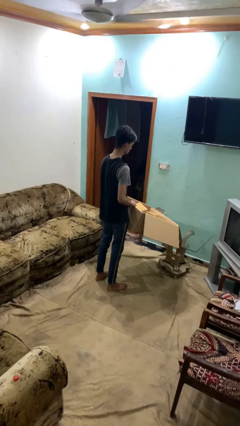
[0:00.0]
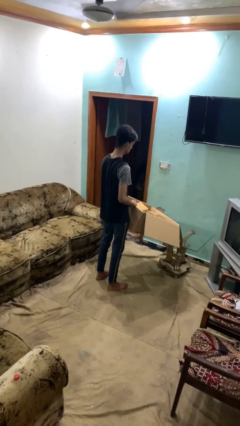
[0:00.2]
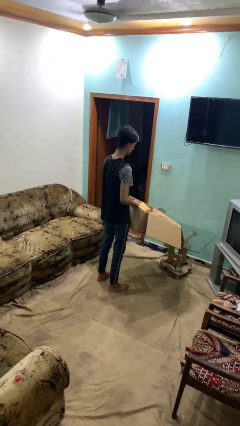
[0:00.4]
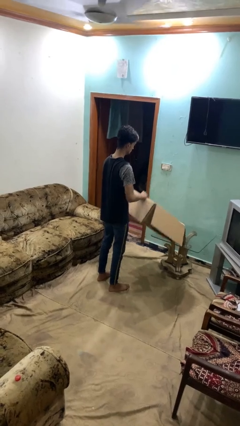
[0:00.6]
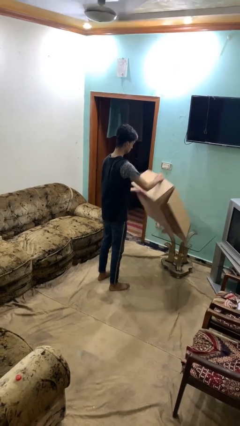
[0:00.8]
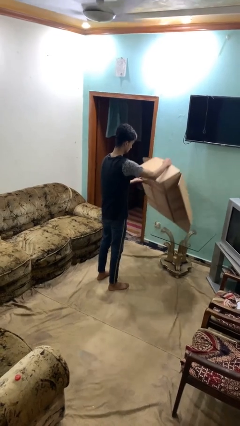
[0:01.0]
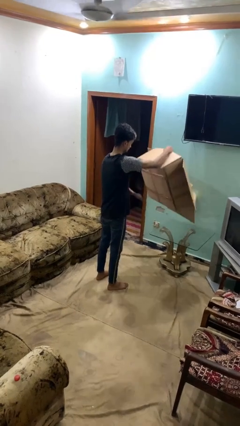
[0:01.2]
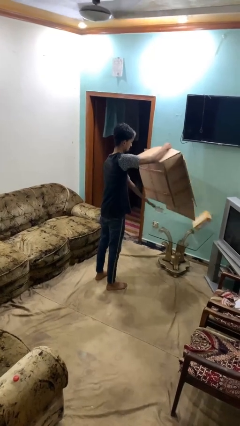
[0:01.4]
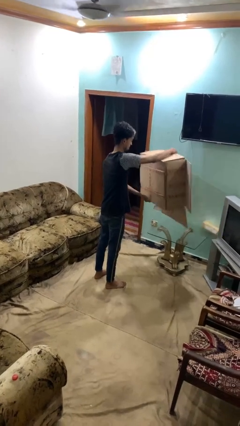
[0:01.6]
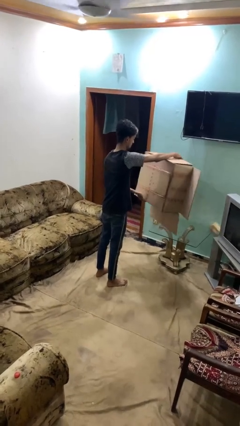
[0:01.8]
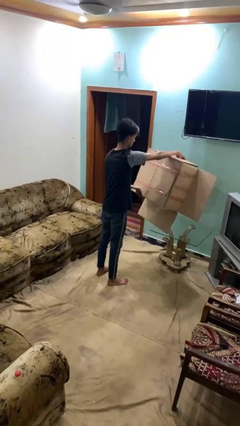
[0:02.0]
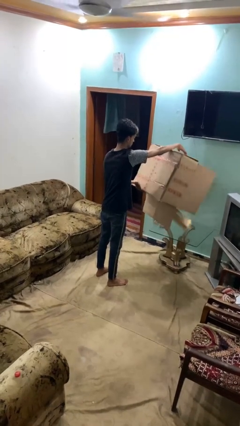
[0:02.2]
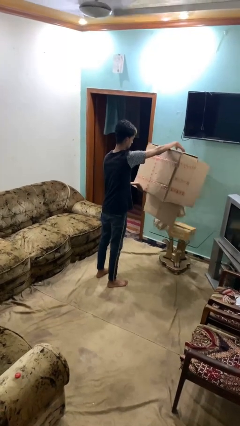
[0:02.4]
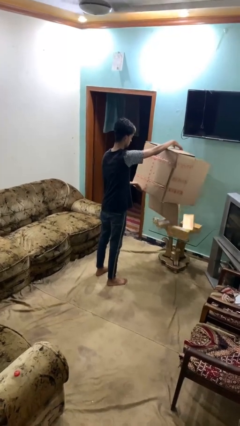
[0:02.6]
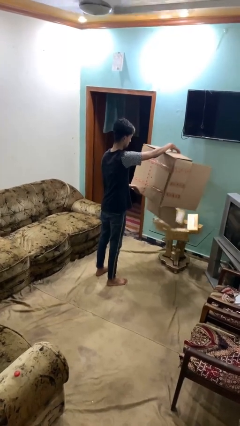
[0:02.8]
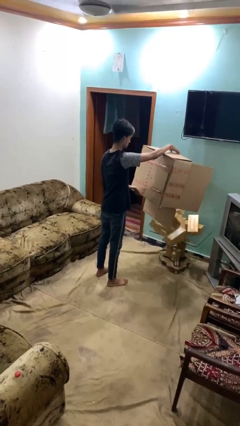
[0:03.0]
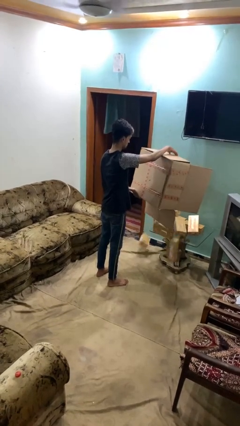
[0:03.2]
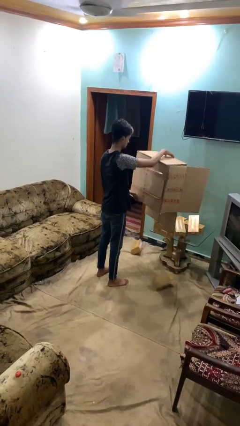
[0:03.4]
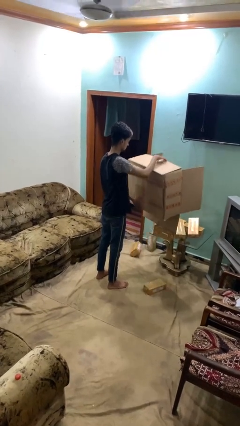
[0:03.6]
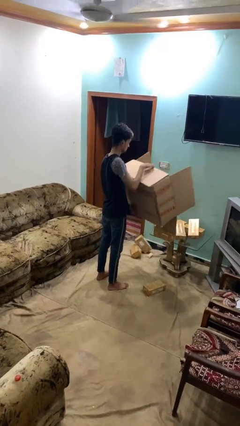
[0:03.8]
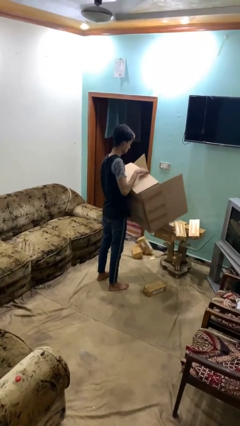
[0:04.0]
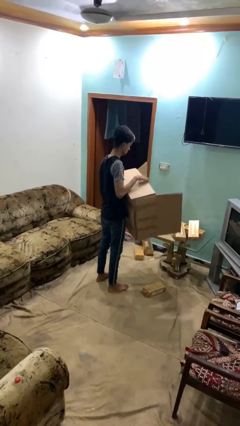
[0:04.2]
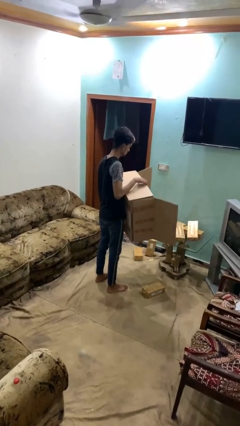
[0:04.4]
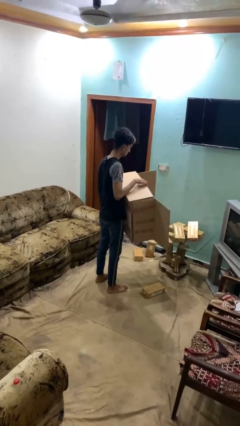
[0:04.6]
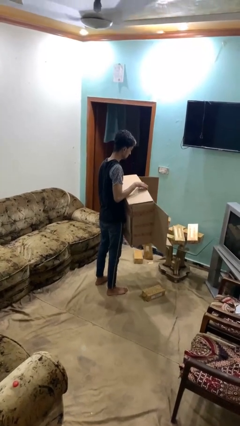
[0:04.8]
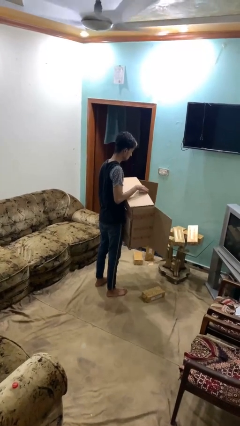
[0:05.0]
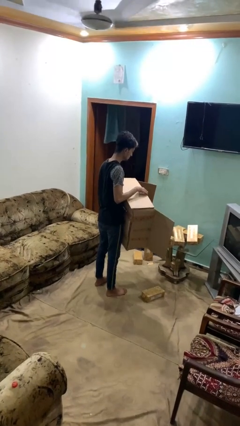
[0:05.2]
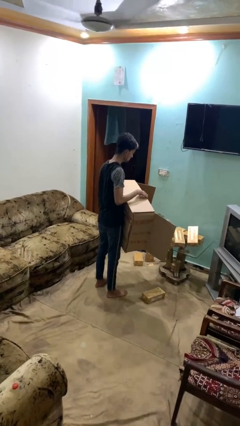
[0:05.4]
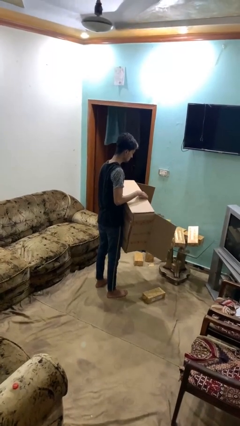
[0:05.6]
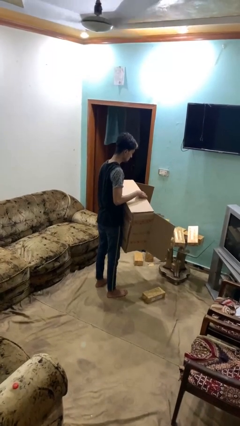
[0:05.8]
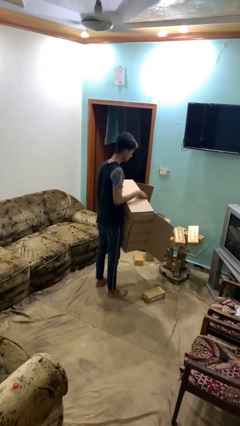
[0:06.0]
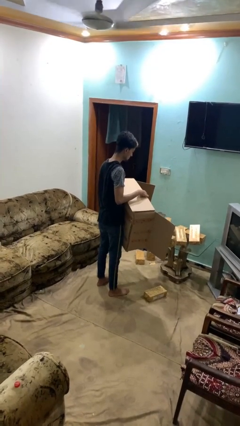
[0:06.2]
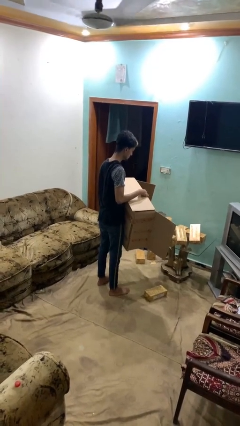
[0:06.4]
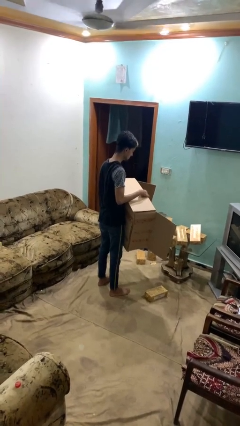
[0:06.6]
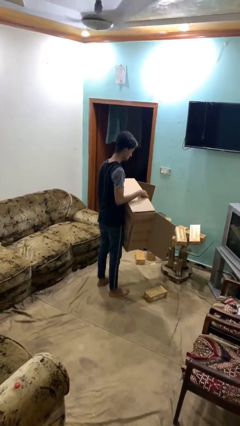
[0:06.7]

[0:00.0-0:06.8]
person unloads box onto table

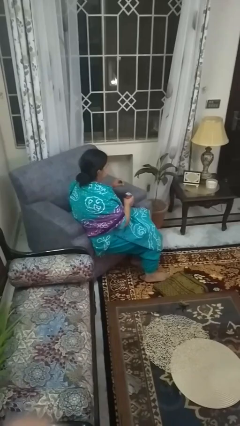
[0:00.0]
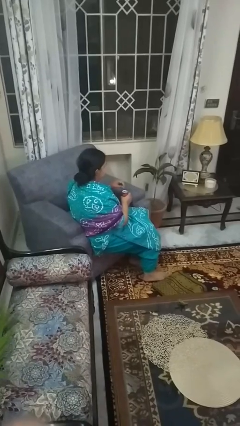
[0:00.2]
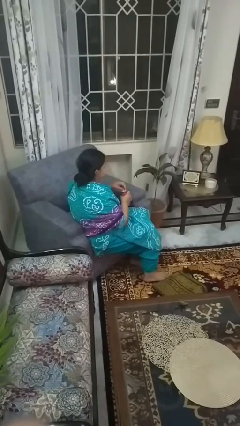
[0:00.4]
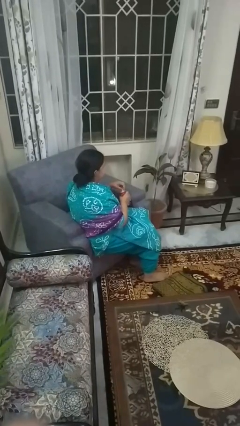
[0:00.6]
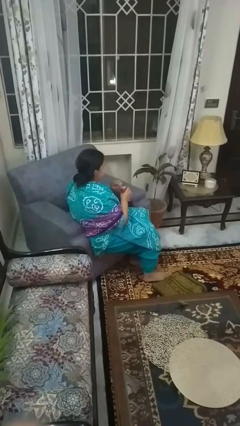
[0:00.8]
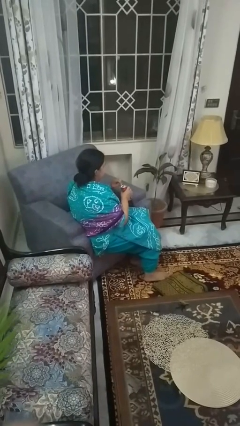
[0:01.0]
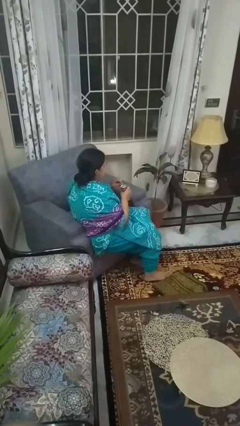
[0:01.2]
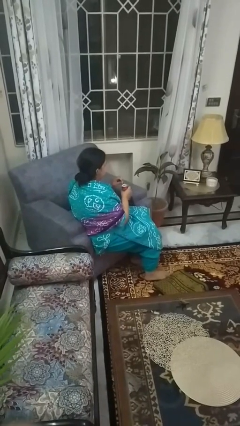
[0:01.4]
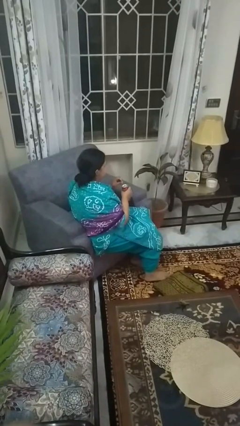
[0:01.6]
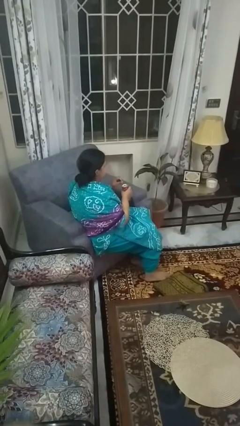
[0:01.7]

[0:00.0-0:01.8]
person opens beverage can

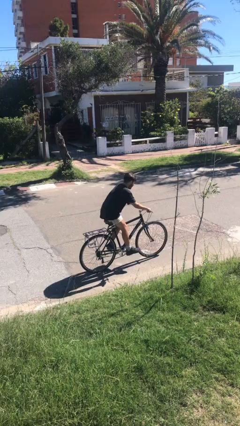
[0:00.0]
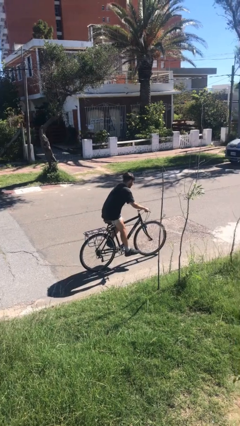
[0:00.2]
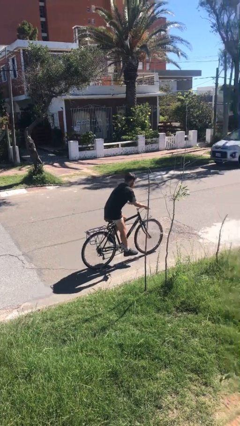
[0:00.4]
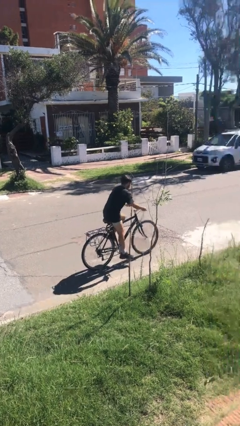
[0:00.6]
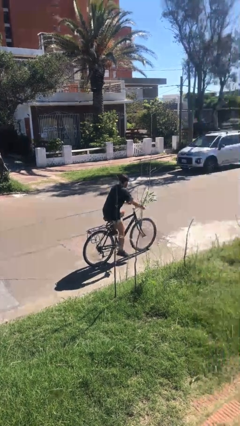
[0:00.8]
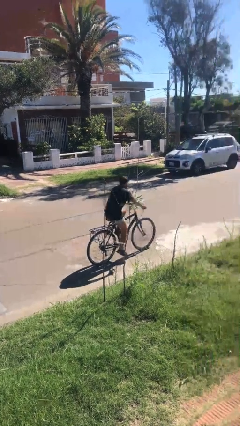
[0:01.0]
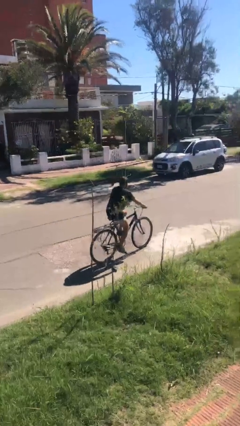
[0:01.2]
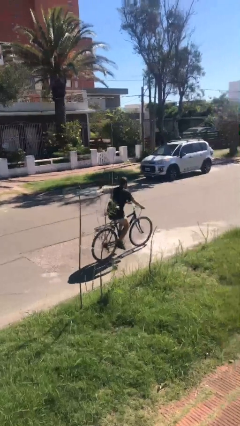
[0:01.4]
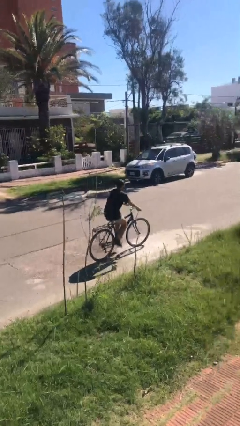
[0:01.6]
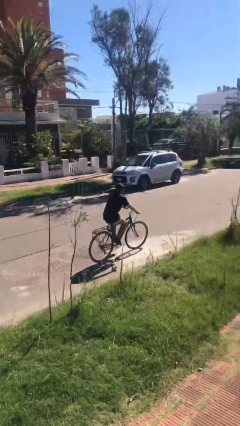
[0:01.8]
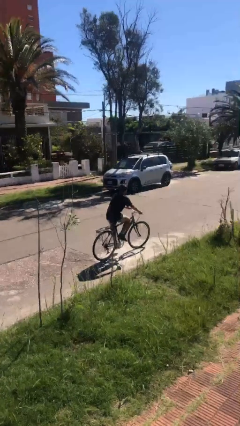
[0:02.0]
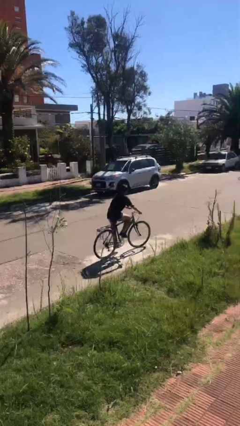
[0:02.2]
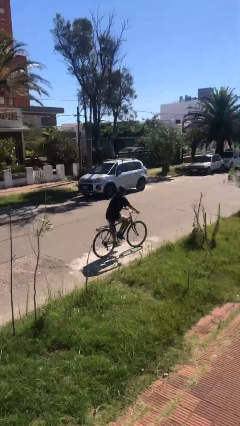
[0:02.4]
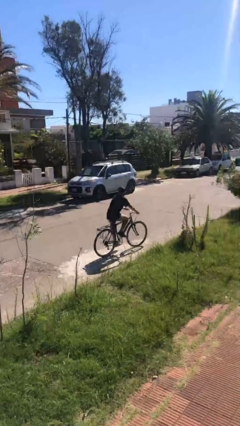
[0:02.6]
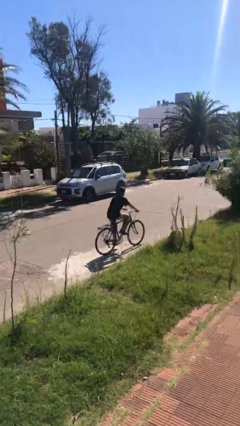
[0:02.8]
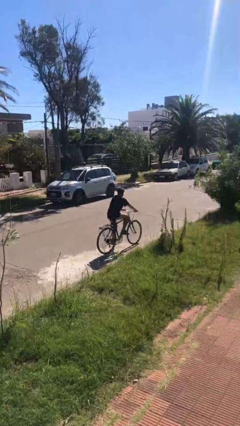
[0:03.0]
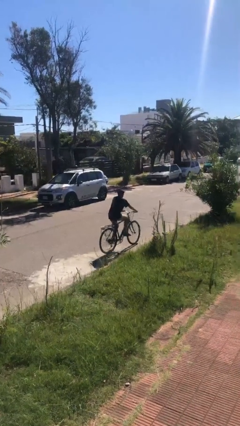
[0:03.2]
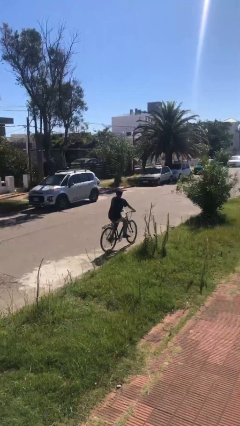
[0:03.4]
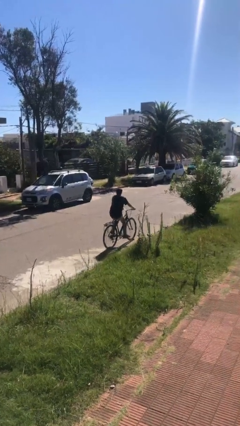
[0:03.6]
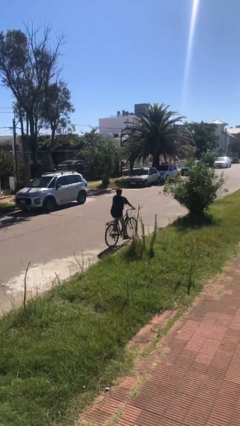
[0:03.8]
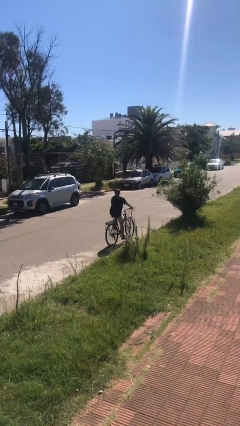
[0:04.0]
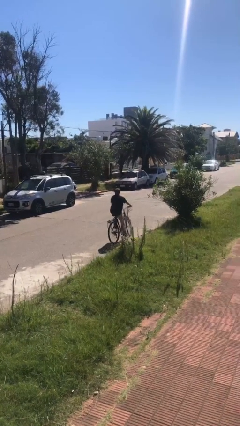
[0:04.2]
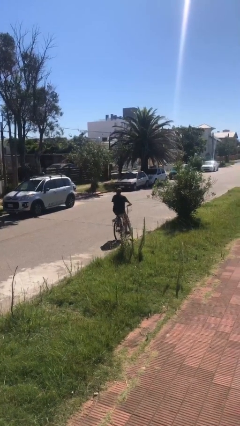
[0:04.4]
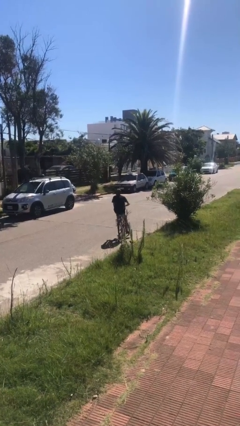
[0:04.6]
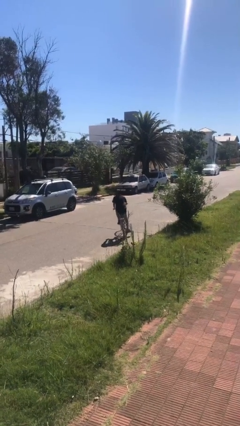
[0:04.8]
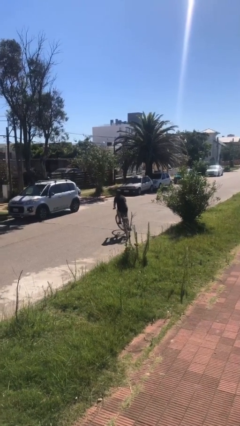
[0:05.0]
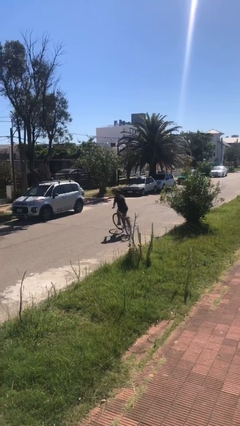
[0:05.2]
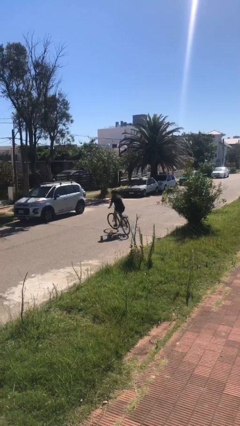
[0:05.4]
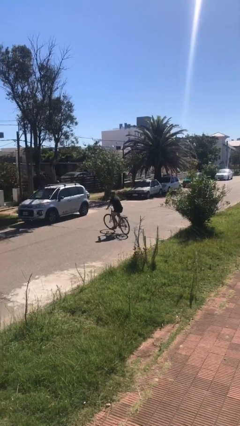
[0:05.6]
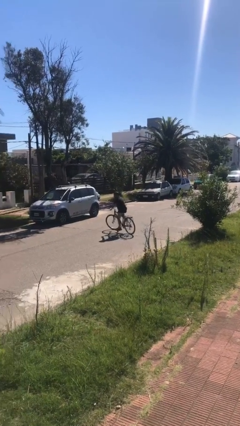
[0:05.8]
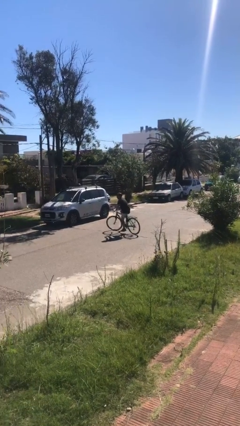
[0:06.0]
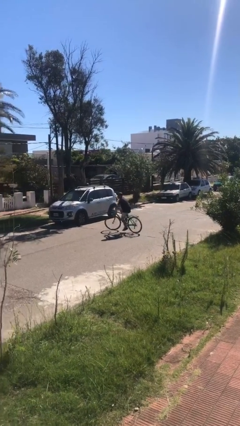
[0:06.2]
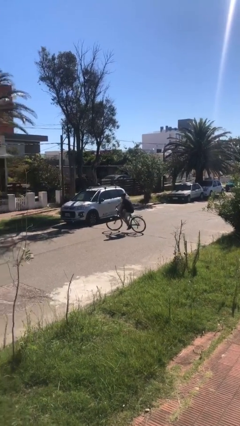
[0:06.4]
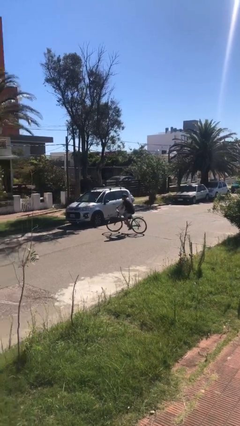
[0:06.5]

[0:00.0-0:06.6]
person rides bicycle

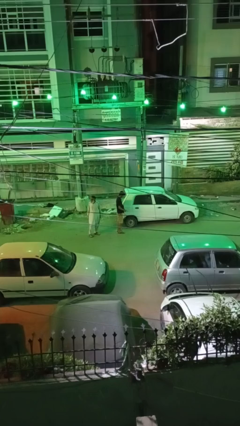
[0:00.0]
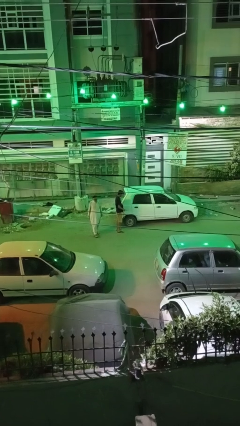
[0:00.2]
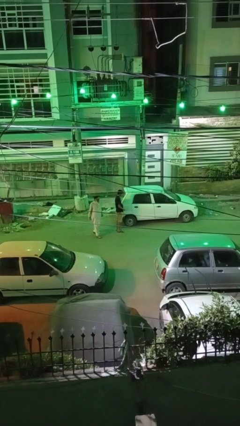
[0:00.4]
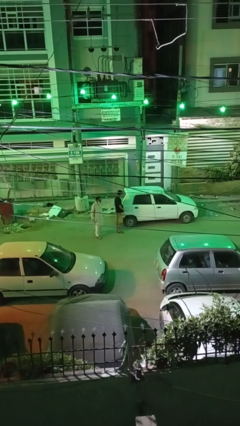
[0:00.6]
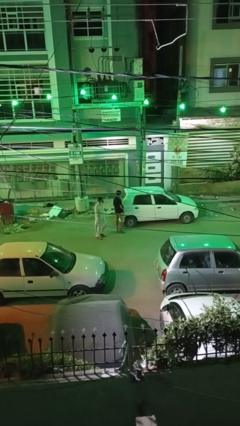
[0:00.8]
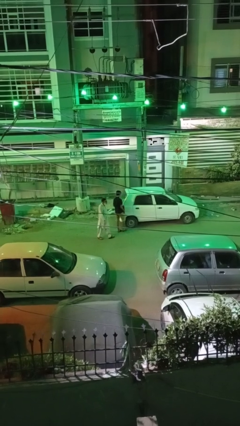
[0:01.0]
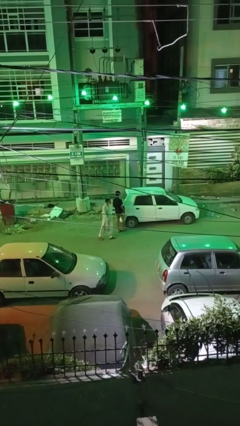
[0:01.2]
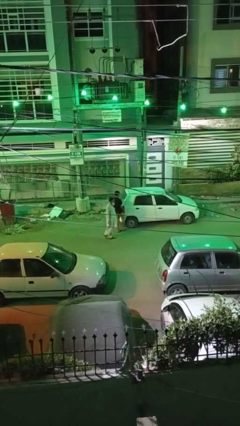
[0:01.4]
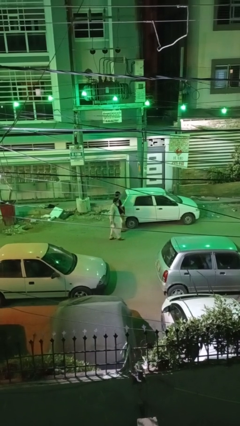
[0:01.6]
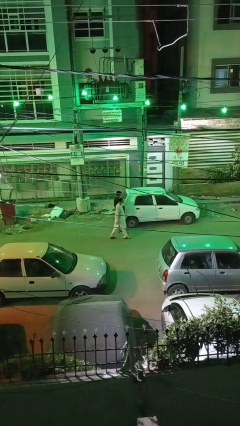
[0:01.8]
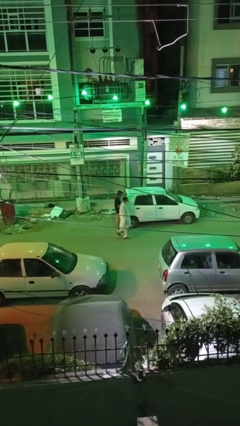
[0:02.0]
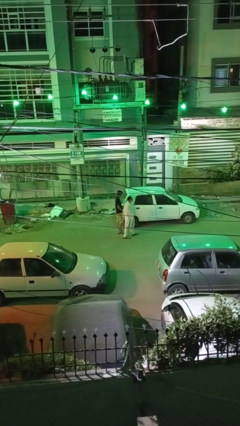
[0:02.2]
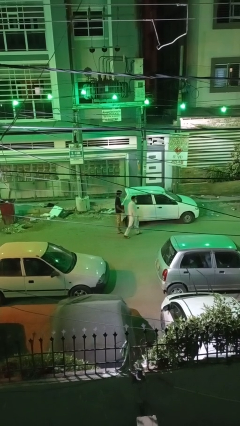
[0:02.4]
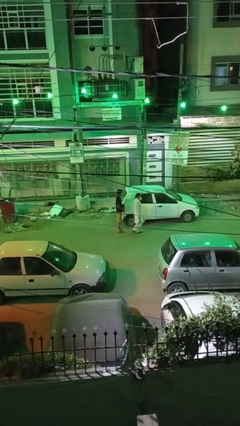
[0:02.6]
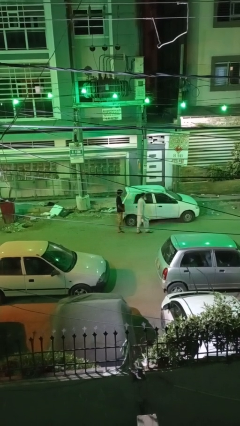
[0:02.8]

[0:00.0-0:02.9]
person kicks car tires
